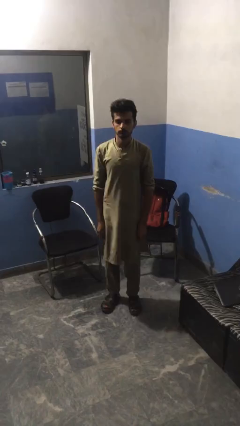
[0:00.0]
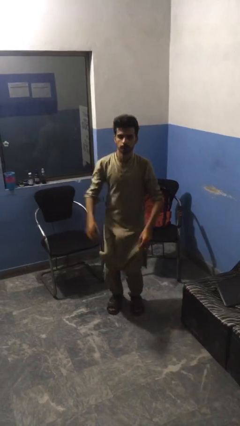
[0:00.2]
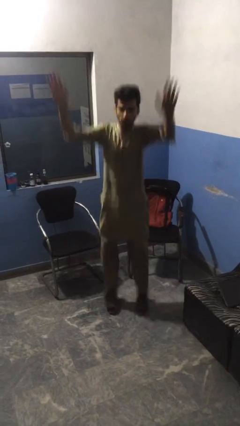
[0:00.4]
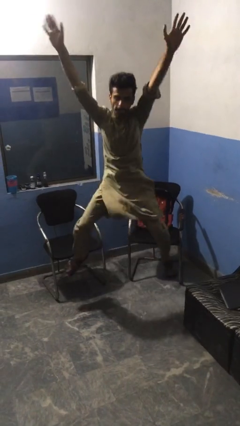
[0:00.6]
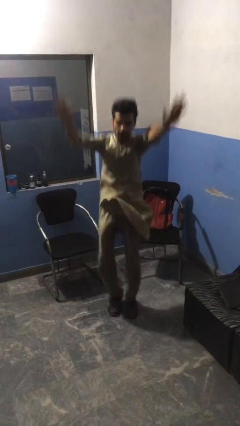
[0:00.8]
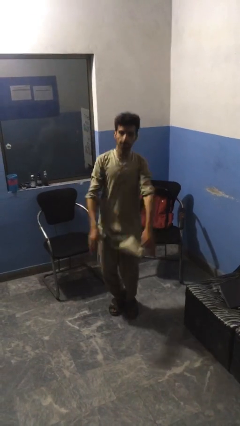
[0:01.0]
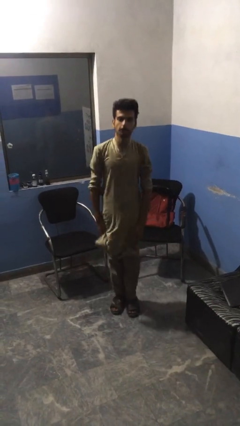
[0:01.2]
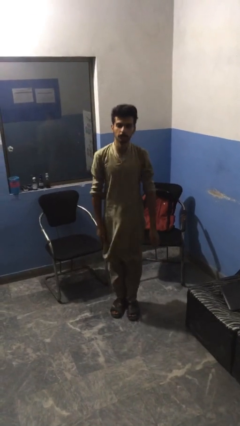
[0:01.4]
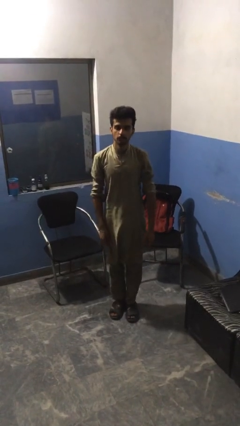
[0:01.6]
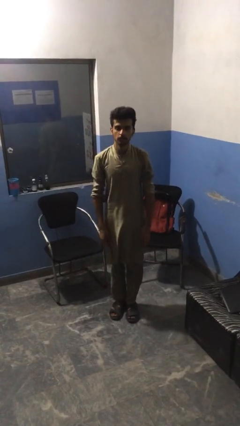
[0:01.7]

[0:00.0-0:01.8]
person exercises with jumping jacks

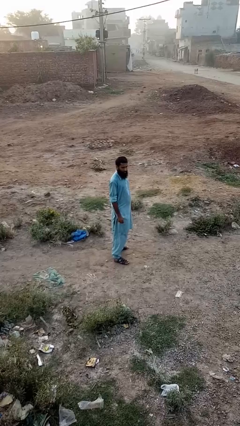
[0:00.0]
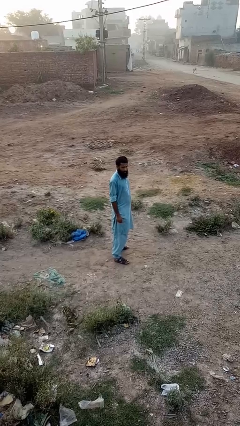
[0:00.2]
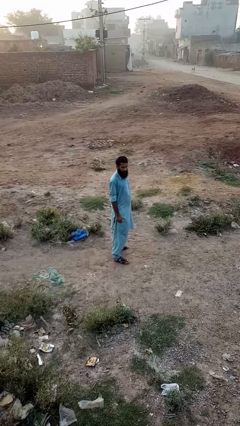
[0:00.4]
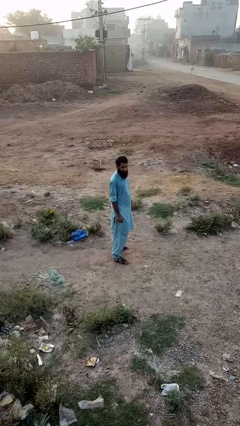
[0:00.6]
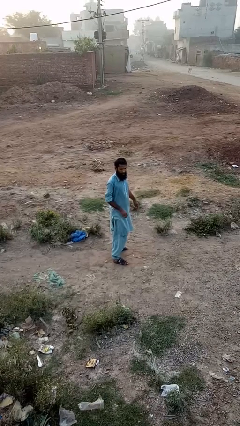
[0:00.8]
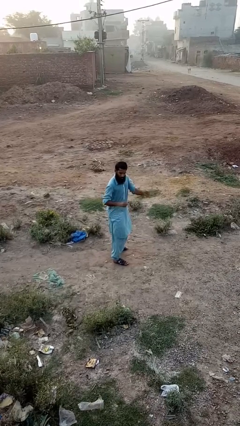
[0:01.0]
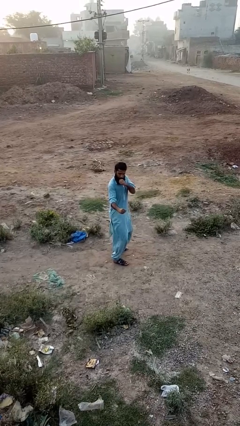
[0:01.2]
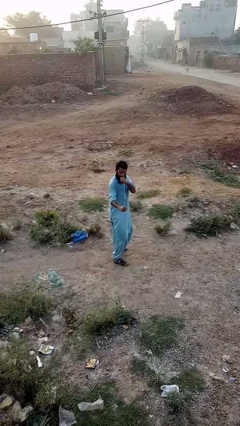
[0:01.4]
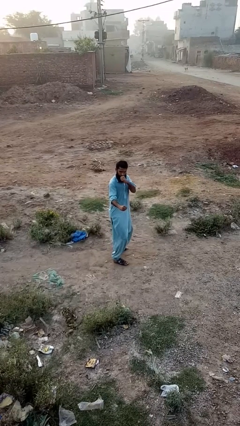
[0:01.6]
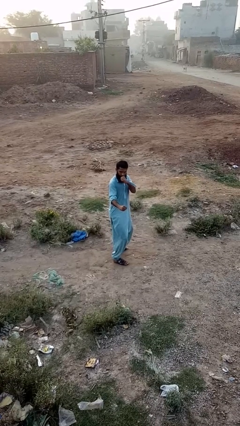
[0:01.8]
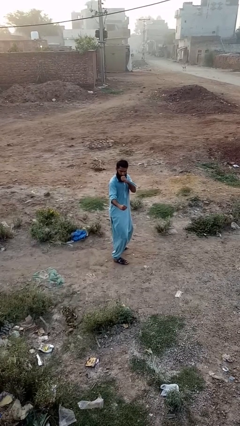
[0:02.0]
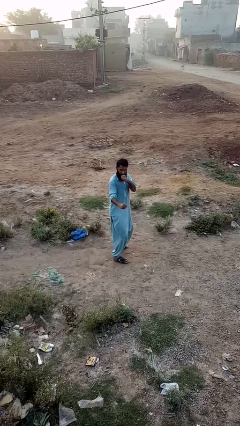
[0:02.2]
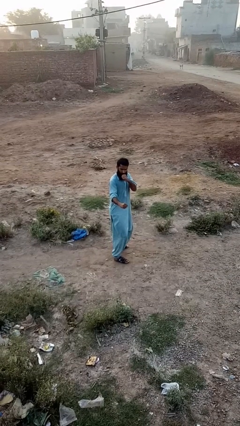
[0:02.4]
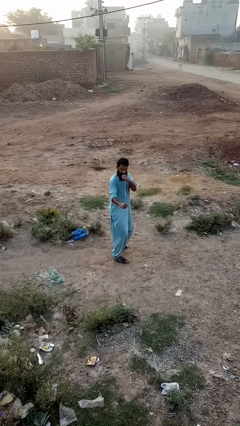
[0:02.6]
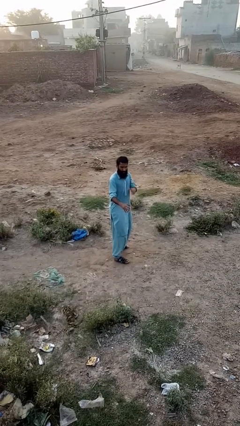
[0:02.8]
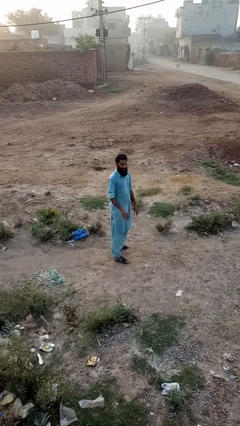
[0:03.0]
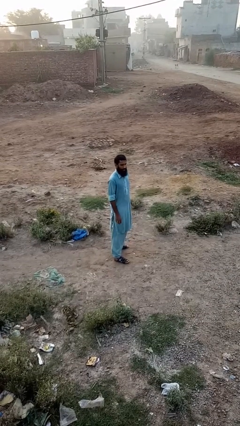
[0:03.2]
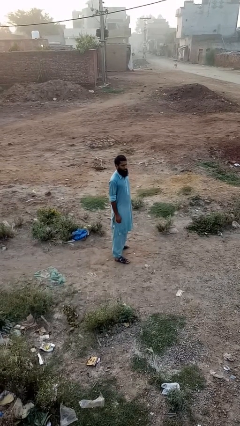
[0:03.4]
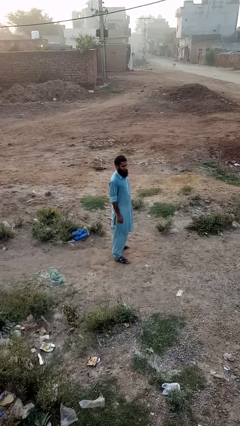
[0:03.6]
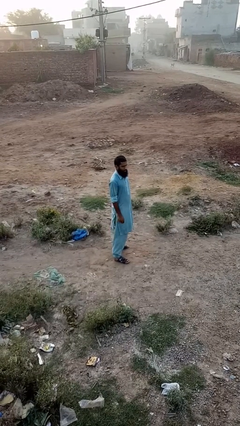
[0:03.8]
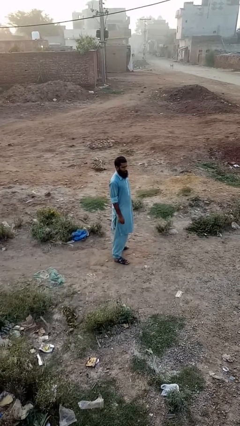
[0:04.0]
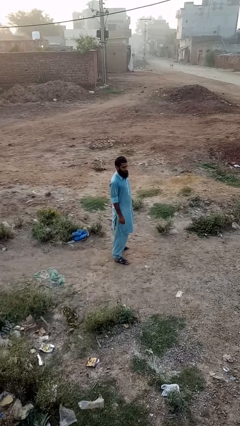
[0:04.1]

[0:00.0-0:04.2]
person karate chop

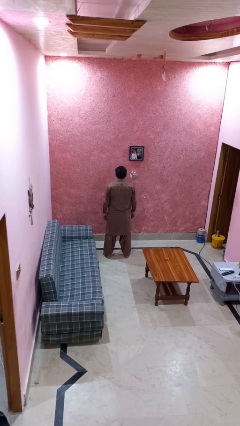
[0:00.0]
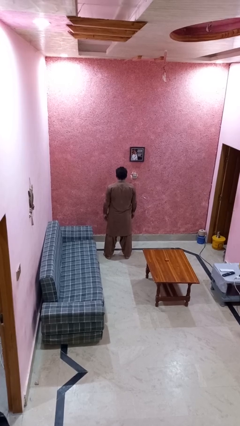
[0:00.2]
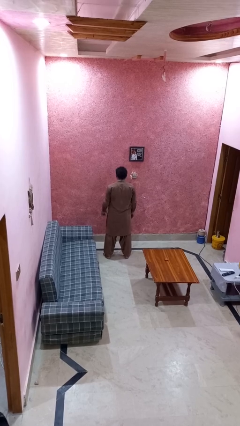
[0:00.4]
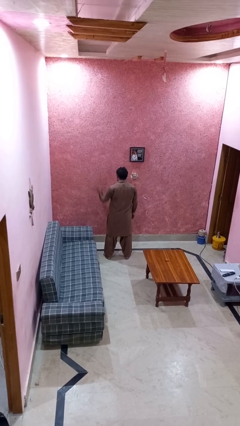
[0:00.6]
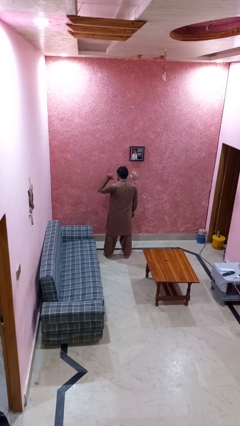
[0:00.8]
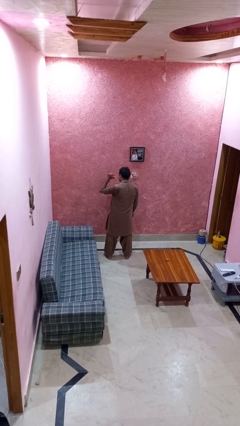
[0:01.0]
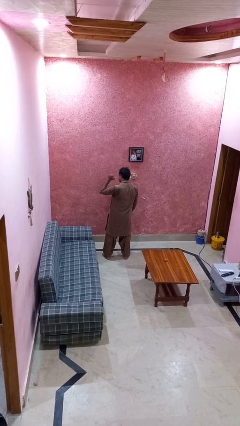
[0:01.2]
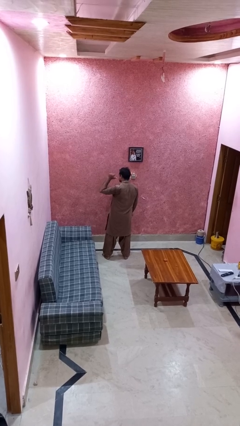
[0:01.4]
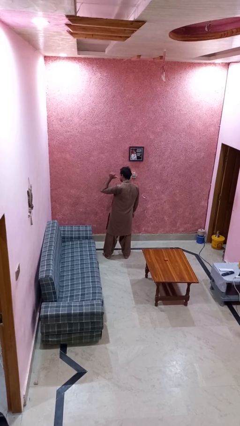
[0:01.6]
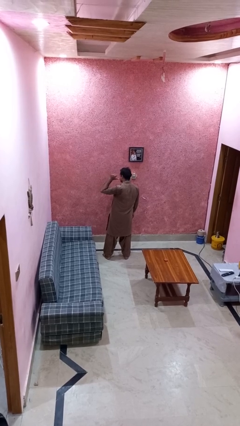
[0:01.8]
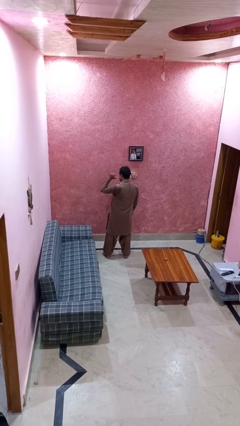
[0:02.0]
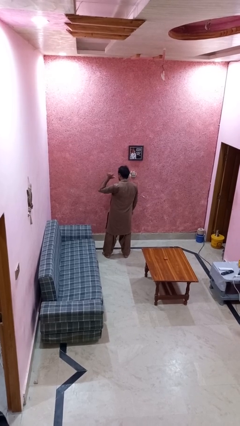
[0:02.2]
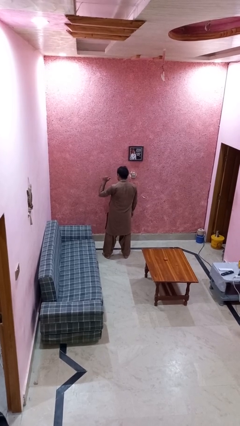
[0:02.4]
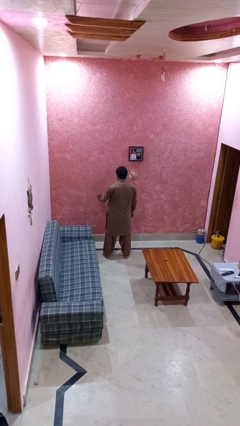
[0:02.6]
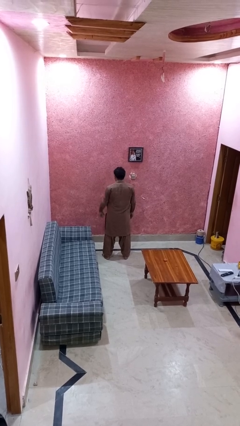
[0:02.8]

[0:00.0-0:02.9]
person gestures behind me

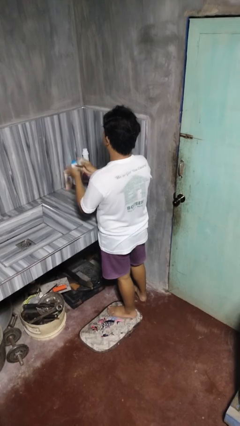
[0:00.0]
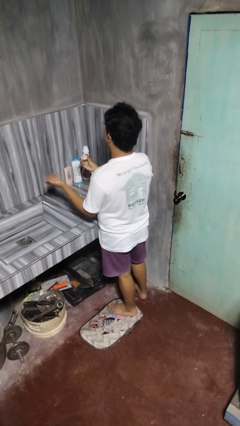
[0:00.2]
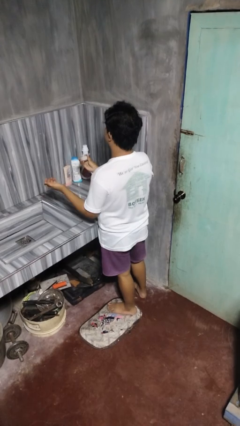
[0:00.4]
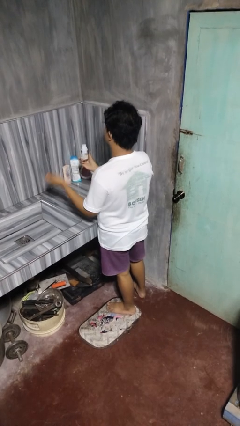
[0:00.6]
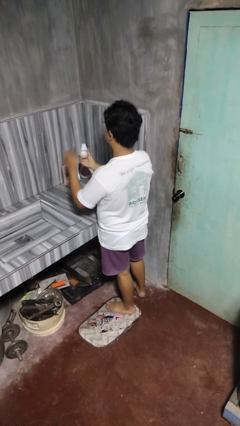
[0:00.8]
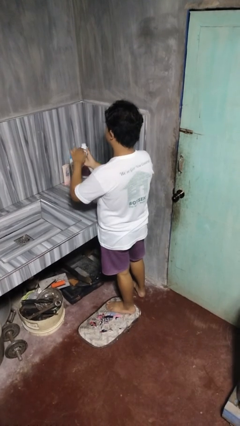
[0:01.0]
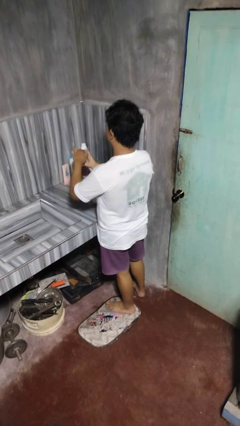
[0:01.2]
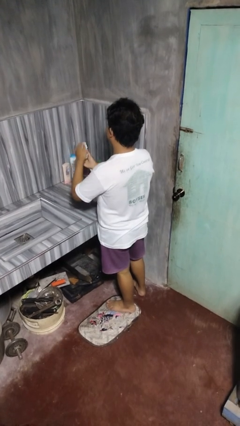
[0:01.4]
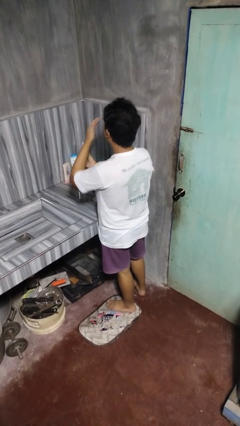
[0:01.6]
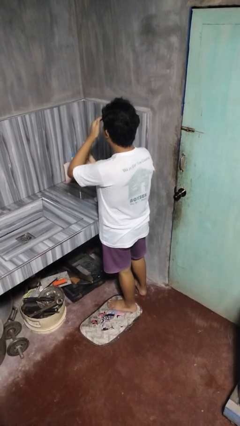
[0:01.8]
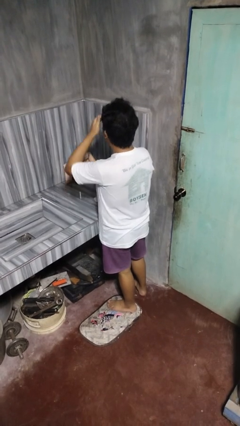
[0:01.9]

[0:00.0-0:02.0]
person applies facial moisturizer

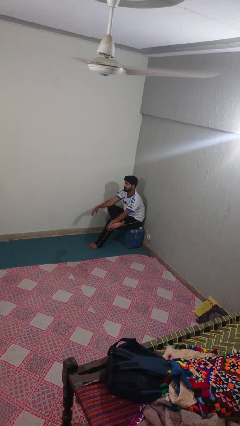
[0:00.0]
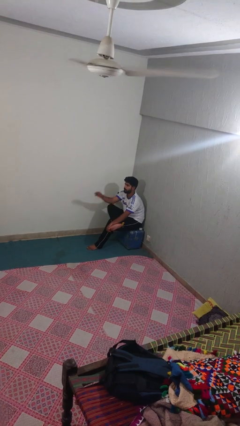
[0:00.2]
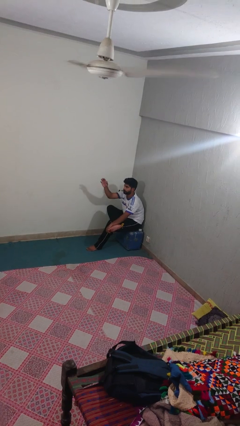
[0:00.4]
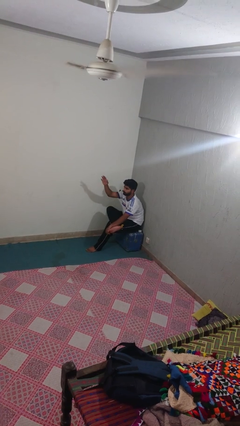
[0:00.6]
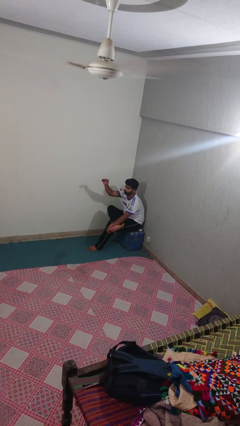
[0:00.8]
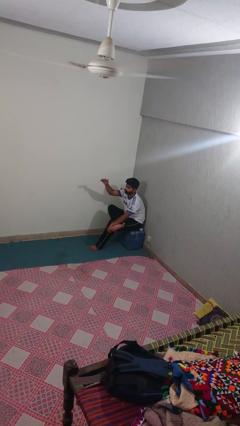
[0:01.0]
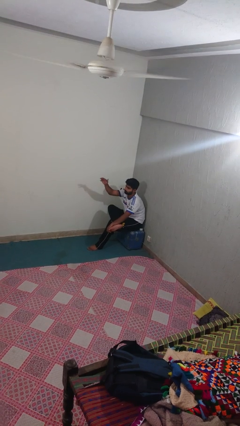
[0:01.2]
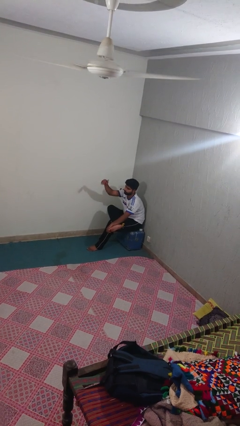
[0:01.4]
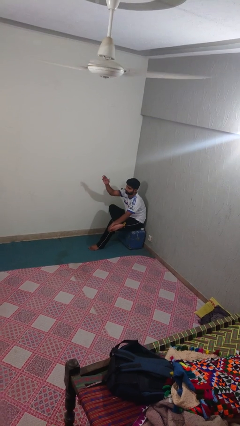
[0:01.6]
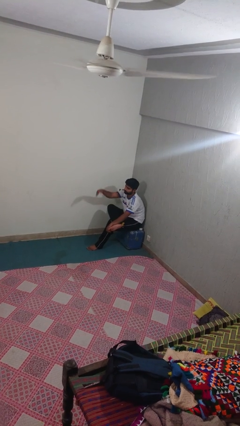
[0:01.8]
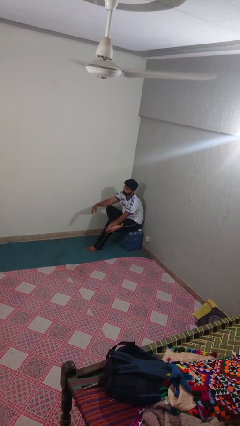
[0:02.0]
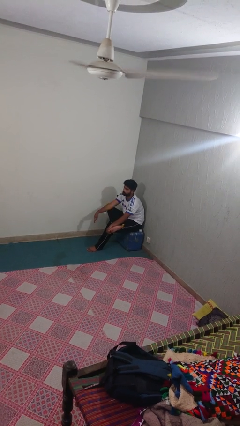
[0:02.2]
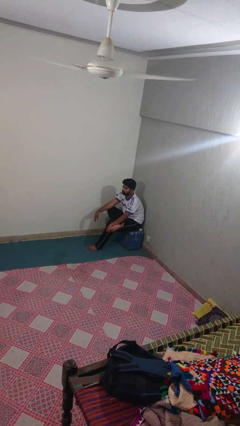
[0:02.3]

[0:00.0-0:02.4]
person gestures come here

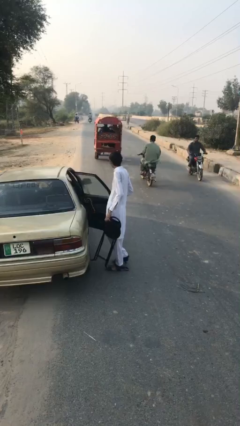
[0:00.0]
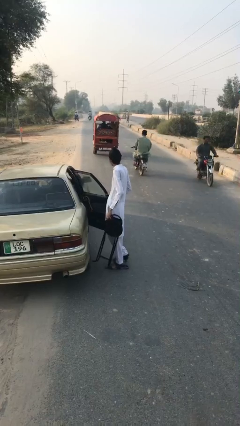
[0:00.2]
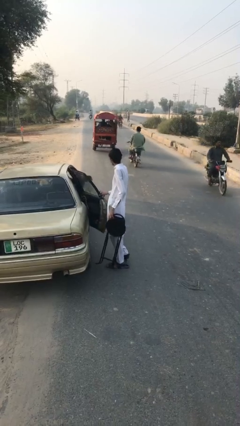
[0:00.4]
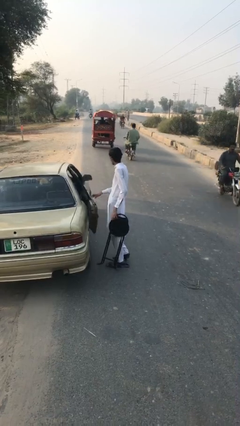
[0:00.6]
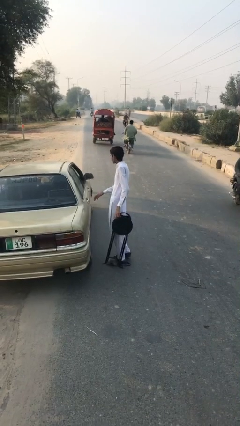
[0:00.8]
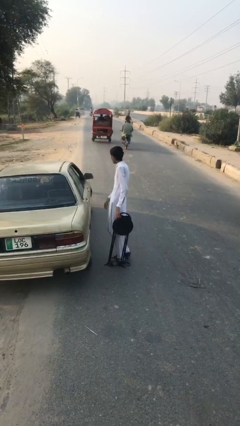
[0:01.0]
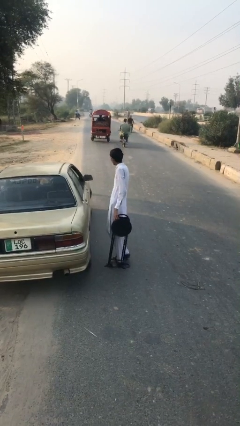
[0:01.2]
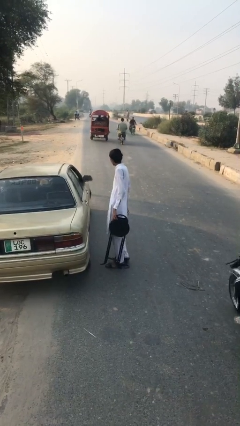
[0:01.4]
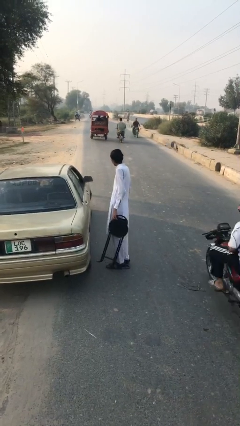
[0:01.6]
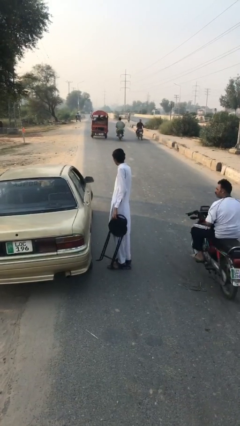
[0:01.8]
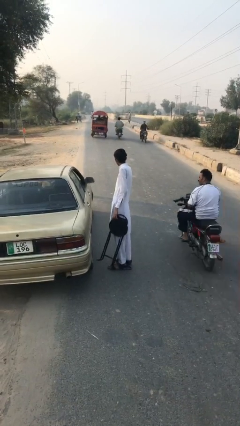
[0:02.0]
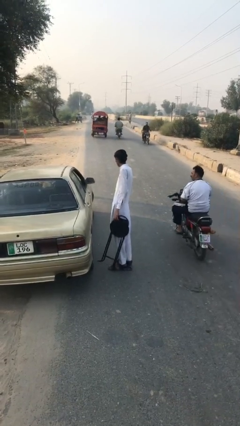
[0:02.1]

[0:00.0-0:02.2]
person closes car door

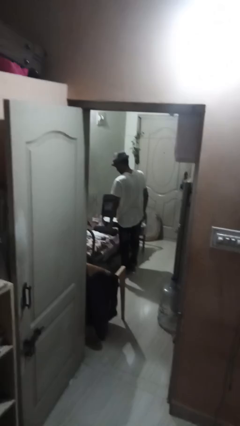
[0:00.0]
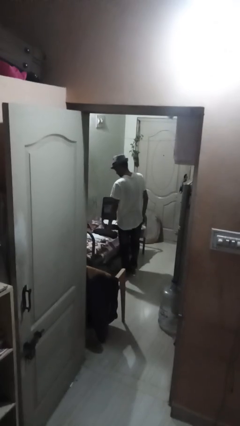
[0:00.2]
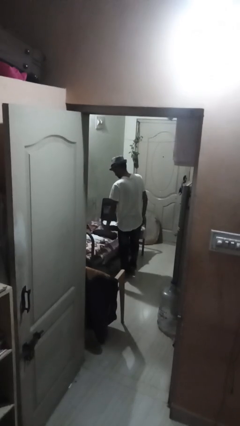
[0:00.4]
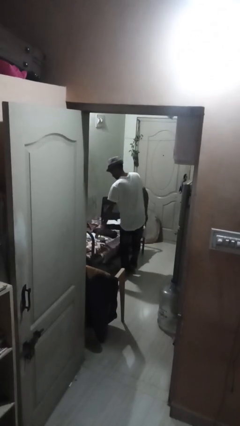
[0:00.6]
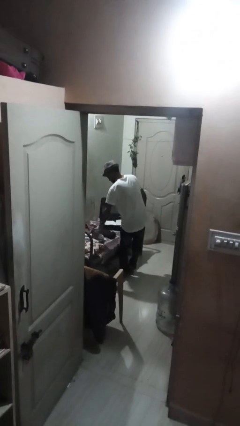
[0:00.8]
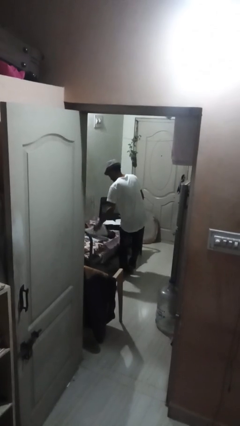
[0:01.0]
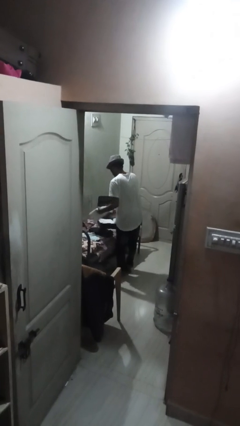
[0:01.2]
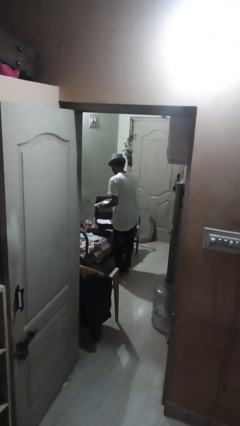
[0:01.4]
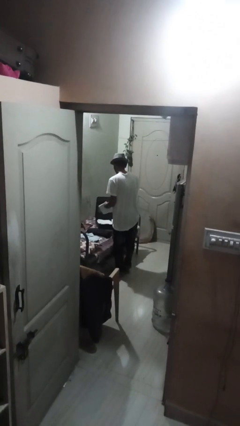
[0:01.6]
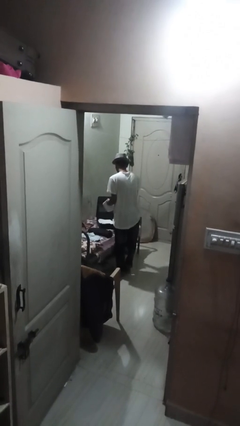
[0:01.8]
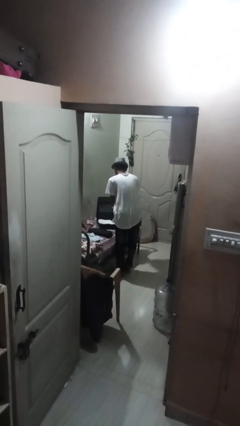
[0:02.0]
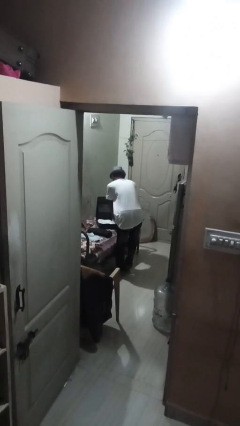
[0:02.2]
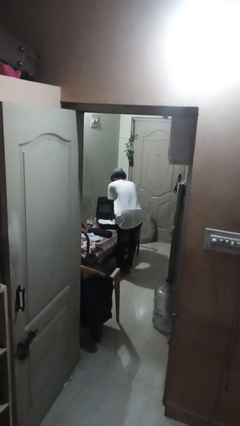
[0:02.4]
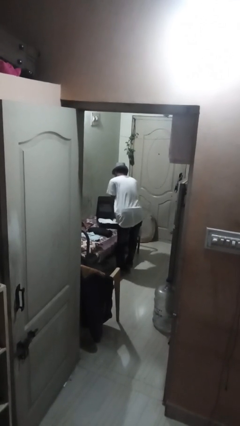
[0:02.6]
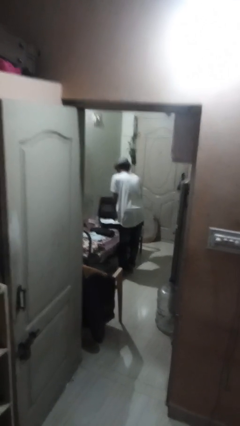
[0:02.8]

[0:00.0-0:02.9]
person loads clothes into suitcase
